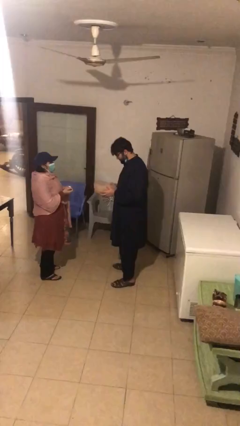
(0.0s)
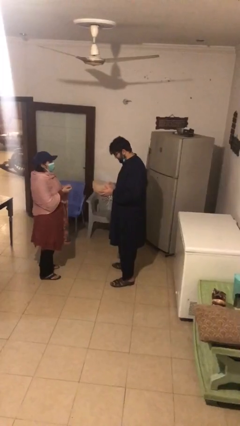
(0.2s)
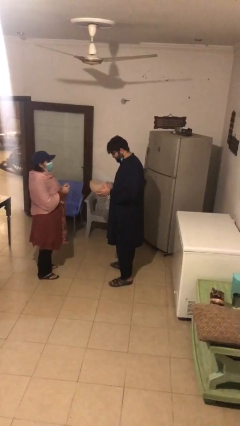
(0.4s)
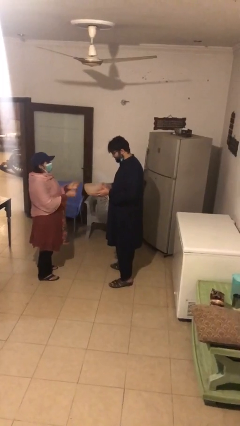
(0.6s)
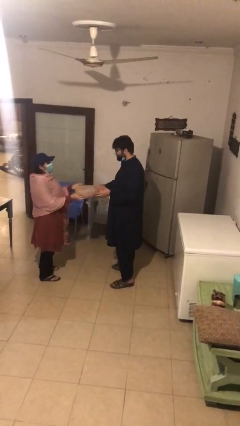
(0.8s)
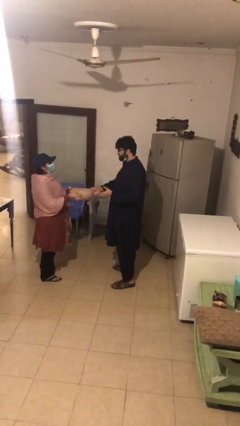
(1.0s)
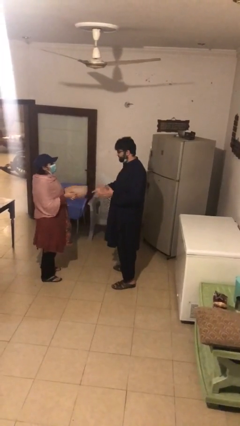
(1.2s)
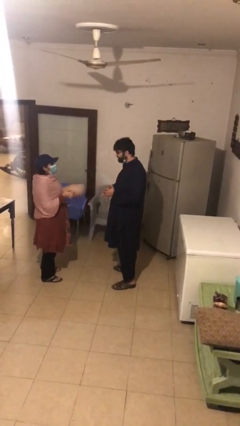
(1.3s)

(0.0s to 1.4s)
person transfers object to person

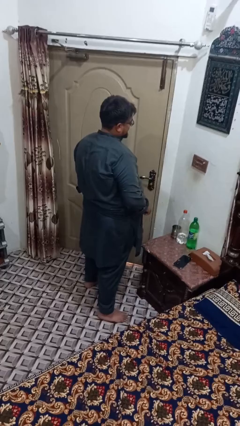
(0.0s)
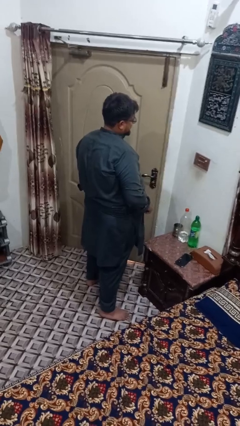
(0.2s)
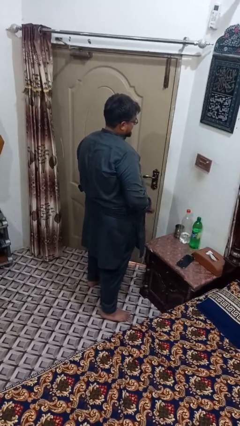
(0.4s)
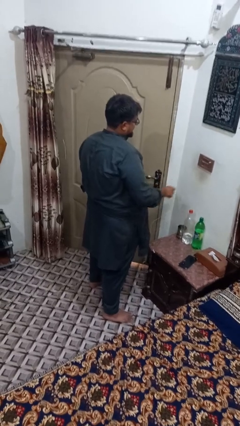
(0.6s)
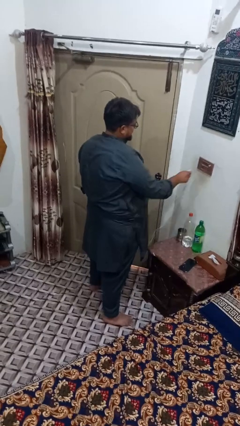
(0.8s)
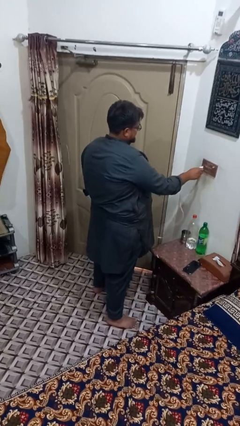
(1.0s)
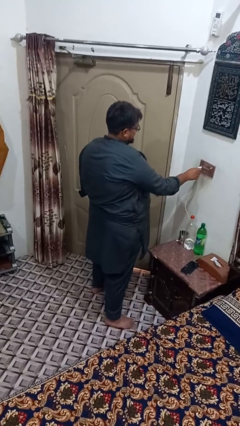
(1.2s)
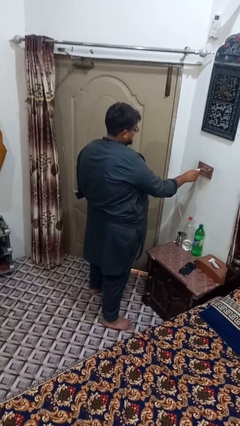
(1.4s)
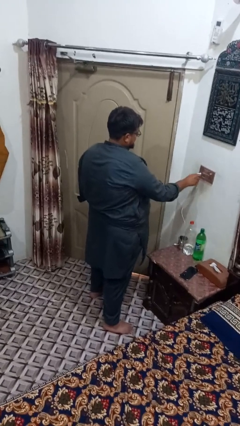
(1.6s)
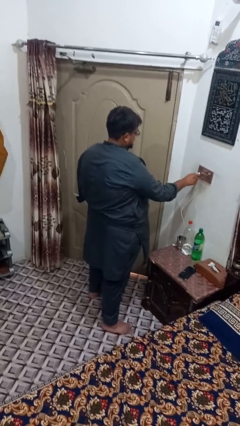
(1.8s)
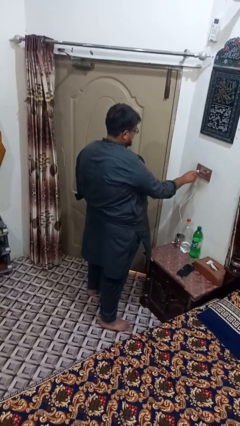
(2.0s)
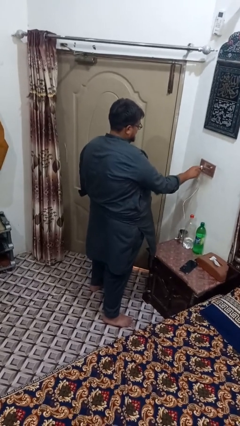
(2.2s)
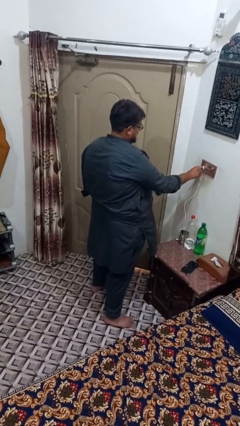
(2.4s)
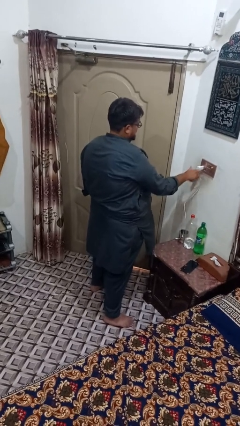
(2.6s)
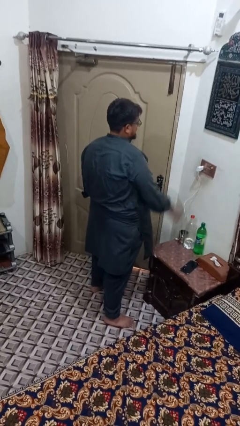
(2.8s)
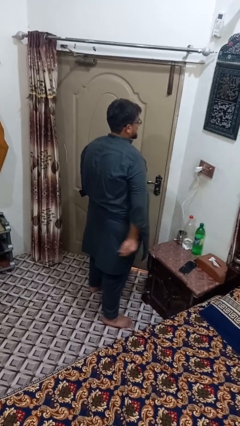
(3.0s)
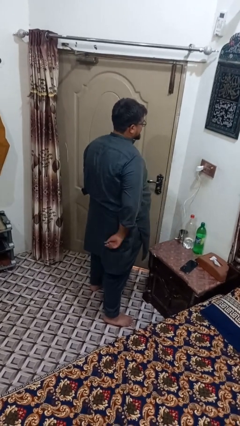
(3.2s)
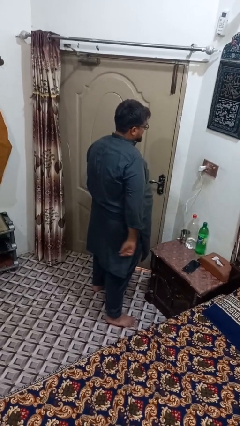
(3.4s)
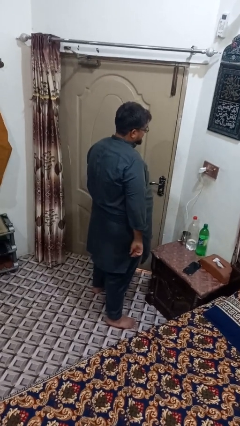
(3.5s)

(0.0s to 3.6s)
person plugs into electrical socket

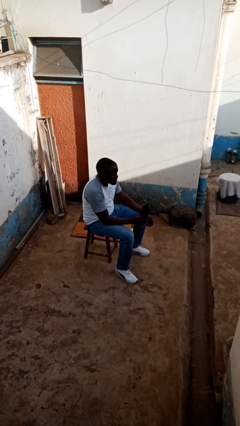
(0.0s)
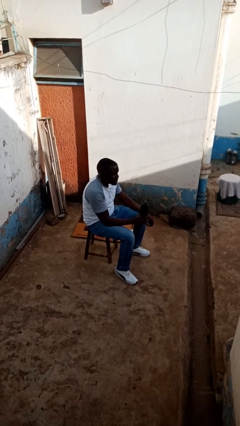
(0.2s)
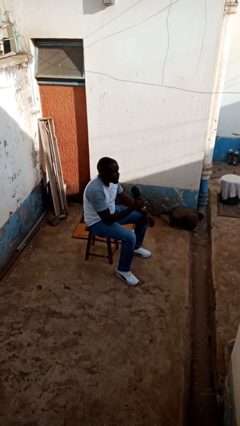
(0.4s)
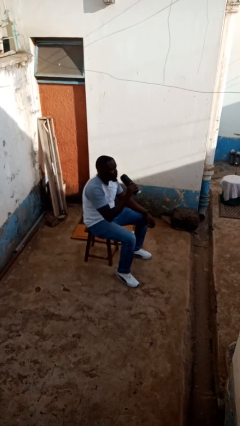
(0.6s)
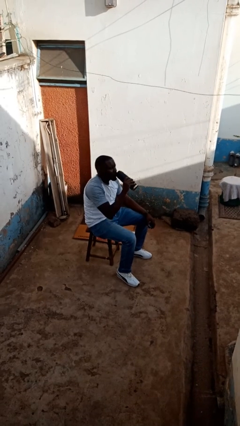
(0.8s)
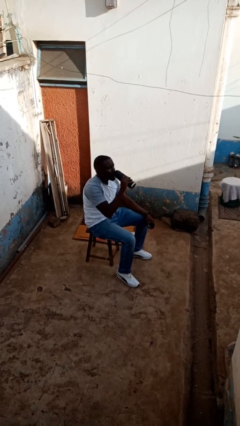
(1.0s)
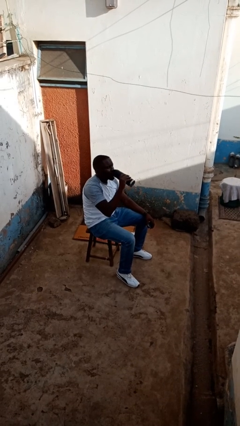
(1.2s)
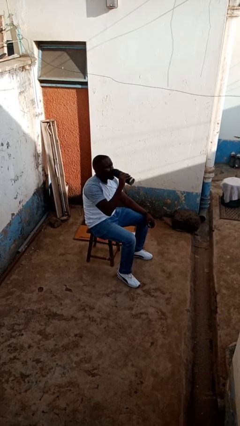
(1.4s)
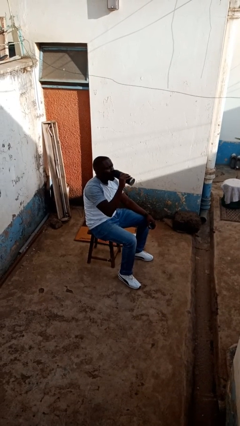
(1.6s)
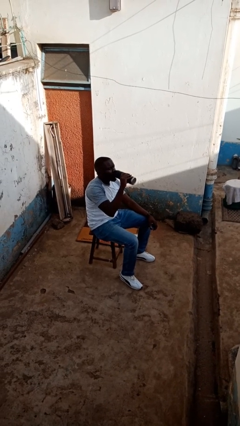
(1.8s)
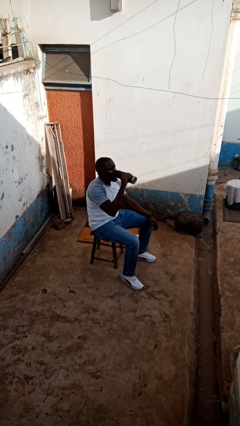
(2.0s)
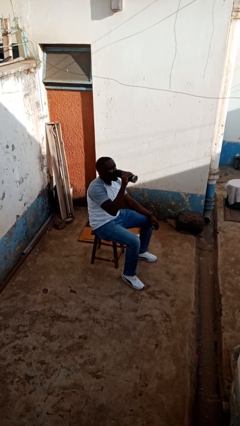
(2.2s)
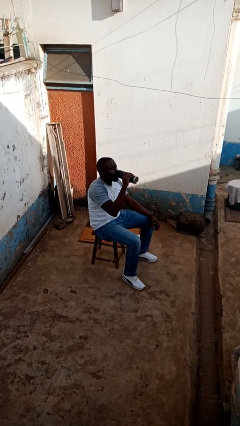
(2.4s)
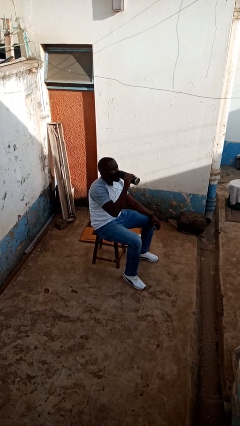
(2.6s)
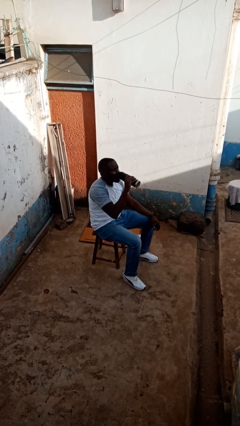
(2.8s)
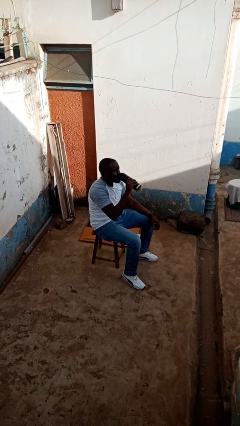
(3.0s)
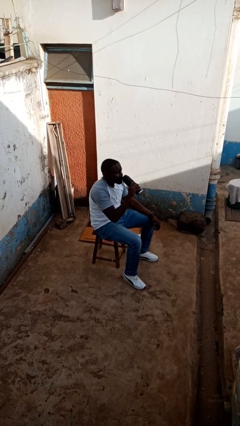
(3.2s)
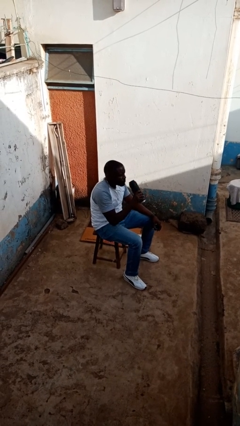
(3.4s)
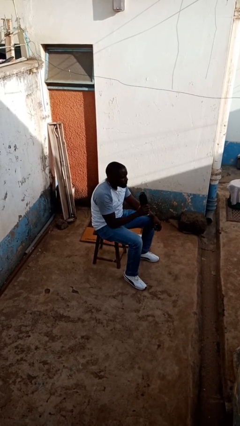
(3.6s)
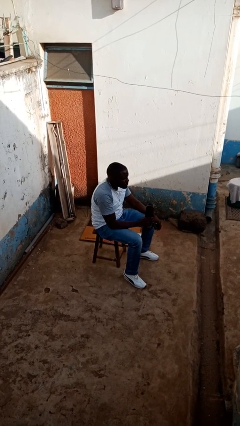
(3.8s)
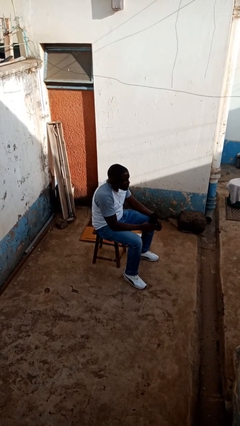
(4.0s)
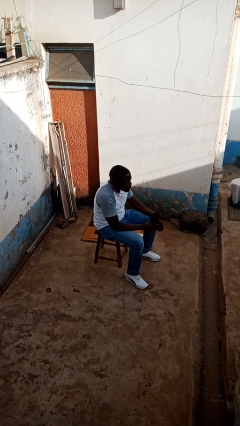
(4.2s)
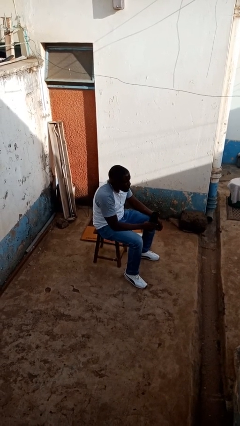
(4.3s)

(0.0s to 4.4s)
person drinks from bottle

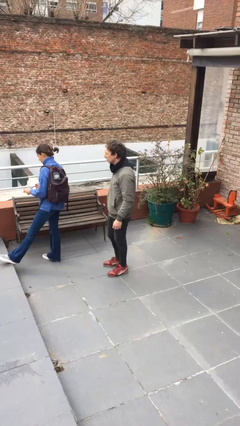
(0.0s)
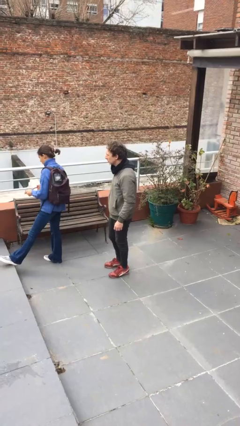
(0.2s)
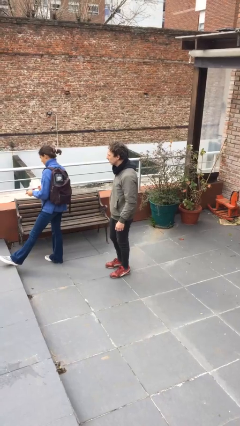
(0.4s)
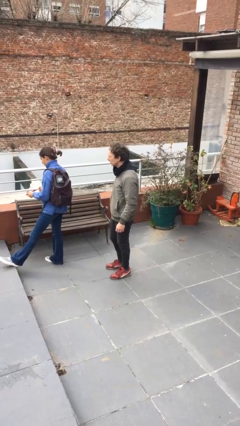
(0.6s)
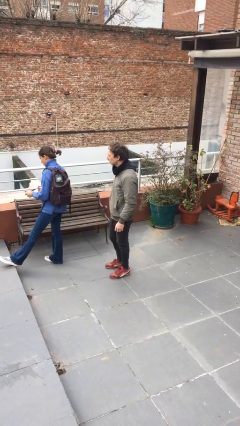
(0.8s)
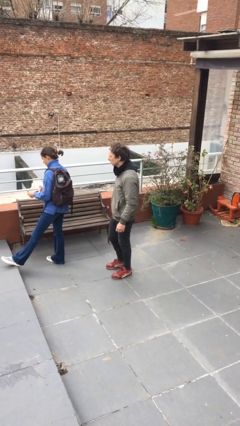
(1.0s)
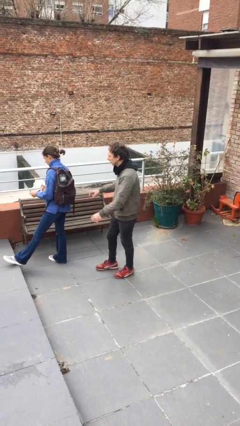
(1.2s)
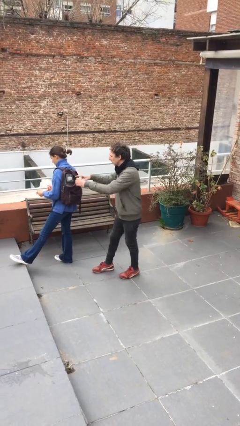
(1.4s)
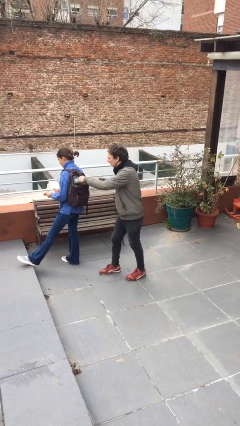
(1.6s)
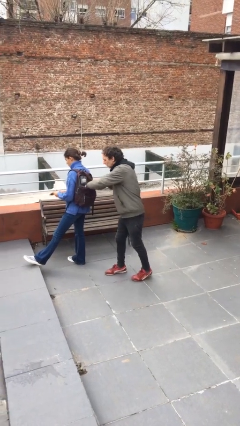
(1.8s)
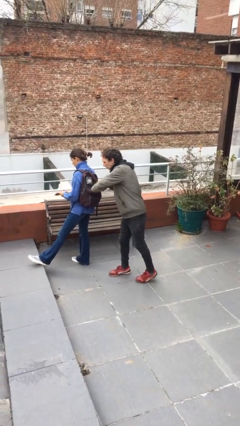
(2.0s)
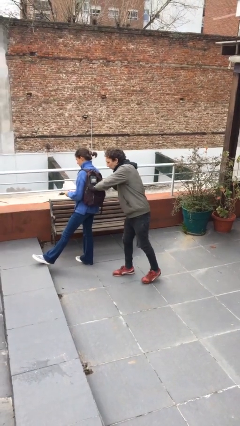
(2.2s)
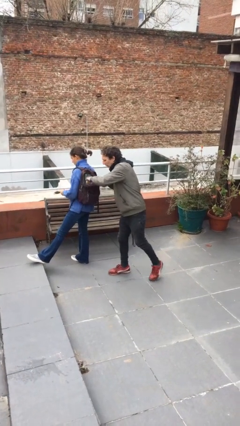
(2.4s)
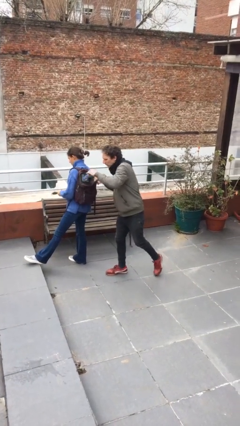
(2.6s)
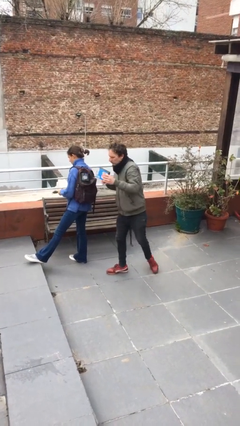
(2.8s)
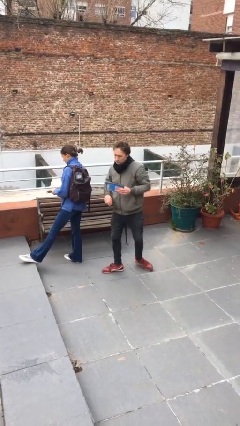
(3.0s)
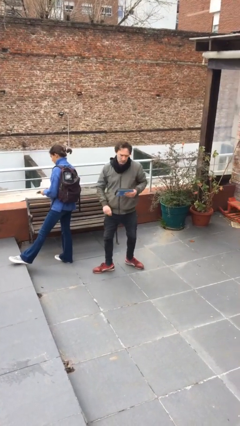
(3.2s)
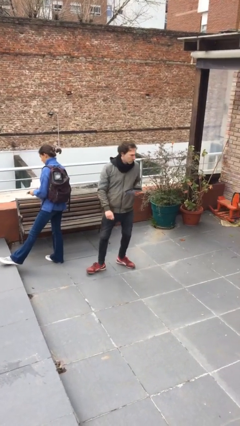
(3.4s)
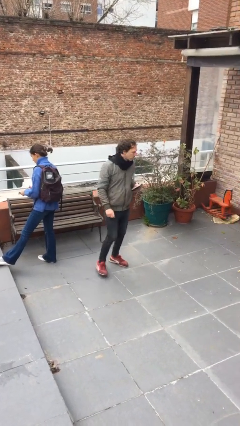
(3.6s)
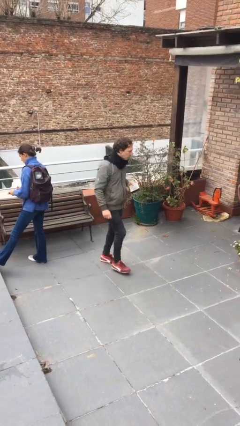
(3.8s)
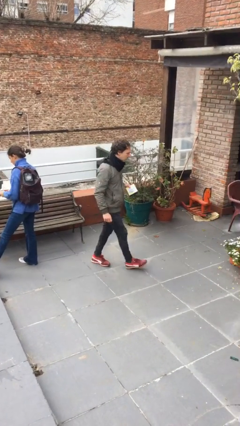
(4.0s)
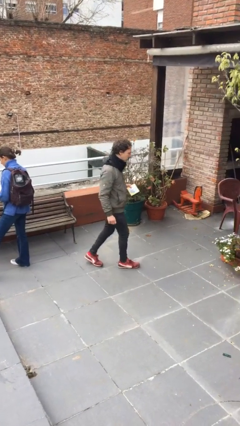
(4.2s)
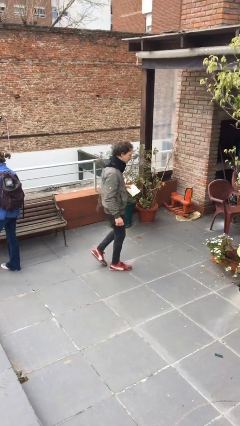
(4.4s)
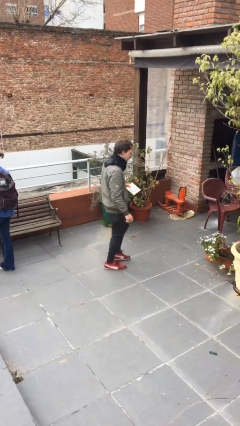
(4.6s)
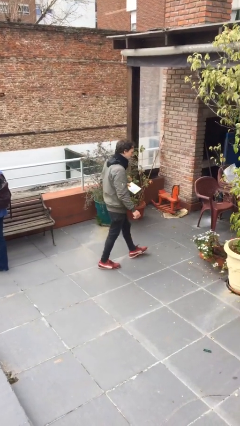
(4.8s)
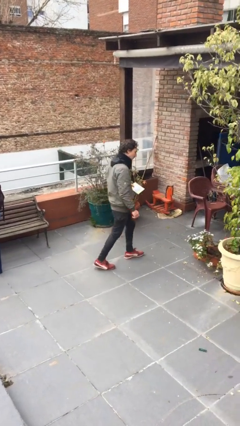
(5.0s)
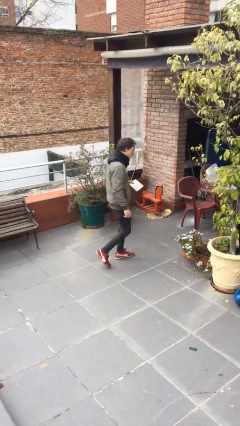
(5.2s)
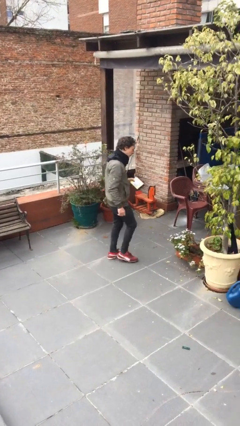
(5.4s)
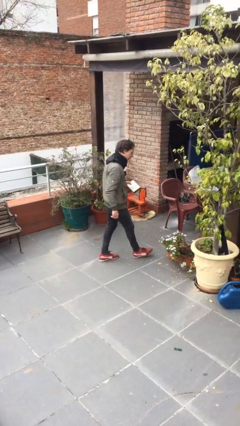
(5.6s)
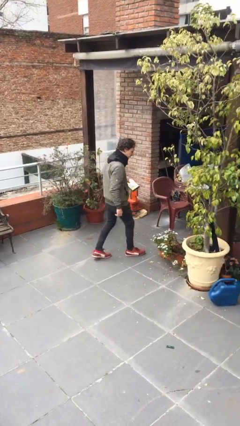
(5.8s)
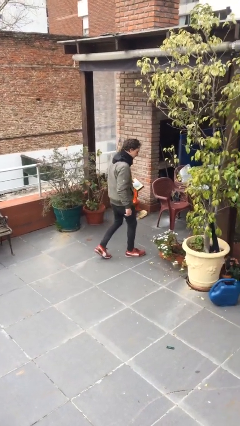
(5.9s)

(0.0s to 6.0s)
person steals object from person

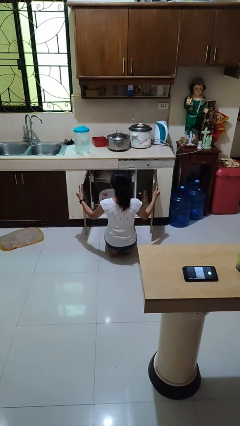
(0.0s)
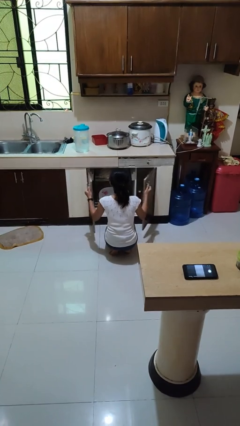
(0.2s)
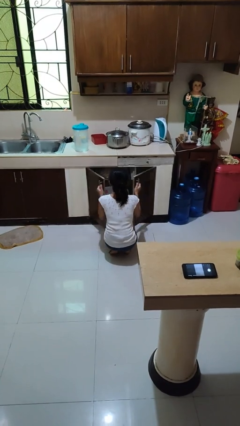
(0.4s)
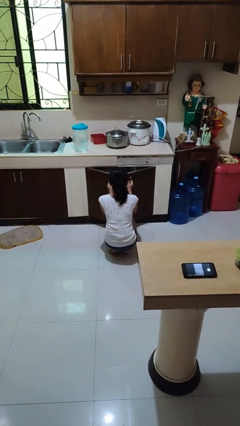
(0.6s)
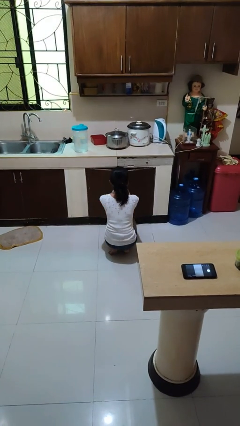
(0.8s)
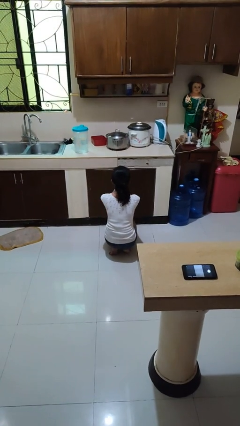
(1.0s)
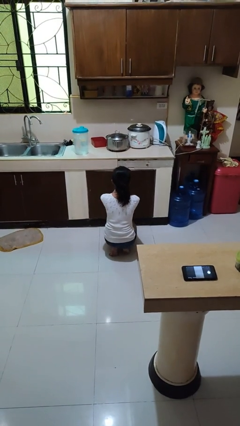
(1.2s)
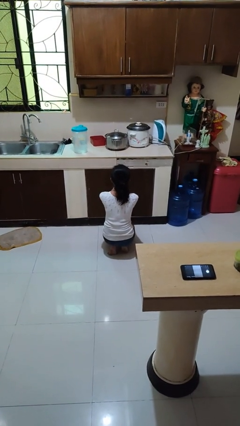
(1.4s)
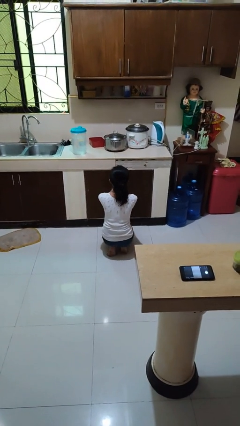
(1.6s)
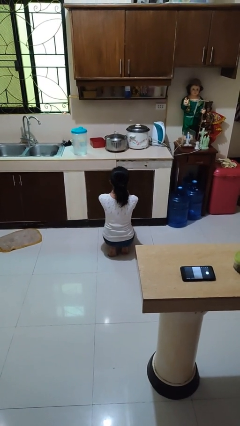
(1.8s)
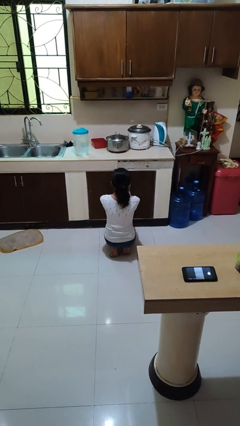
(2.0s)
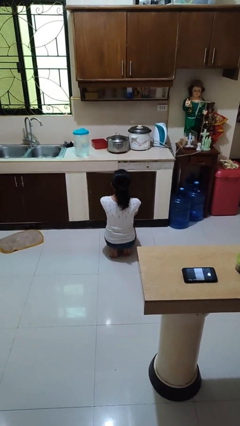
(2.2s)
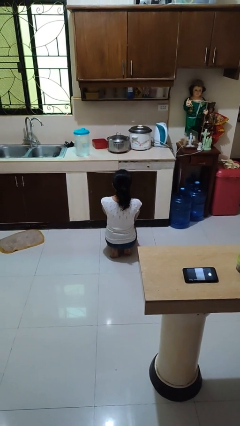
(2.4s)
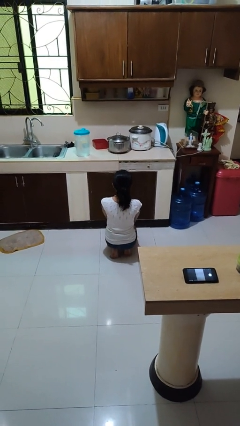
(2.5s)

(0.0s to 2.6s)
person closes dishwasher
